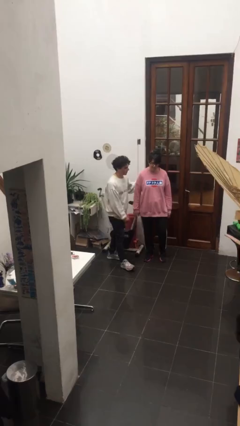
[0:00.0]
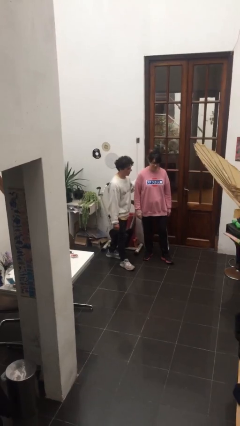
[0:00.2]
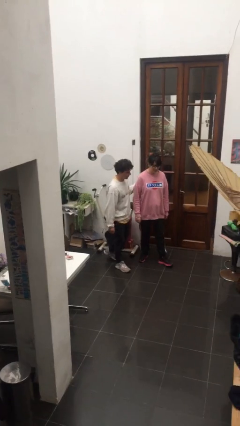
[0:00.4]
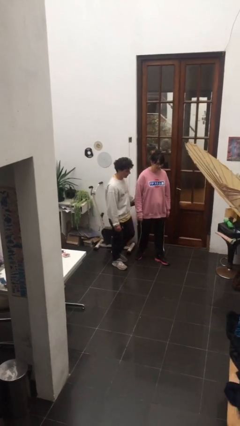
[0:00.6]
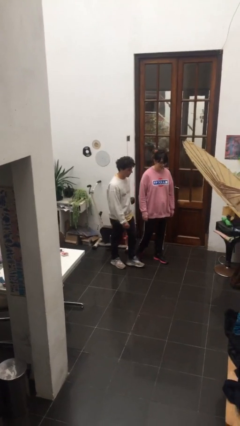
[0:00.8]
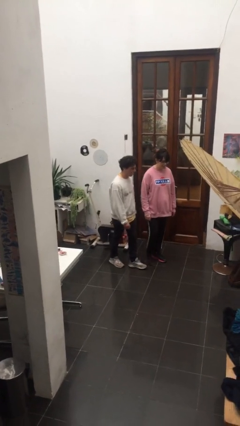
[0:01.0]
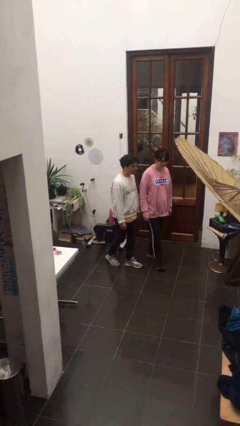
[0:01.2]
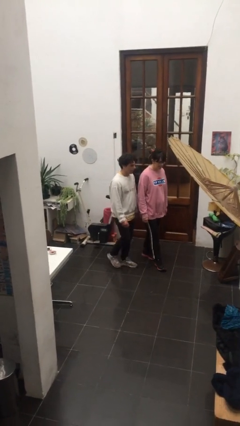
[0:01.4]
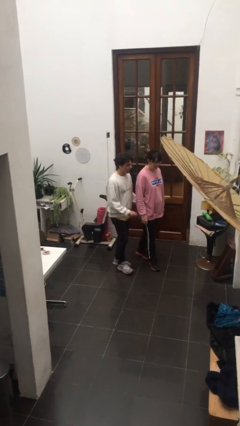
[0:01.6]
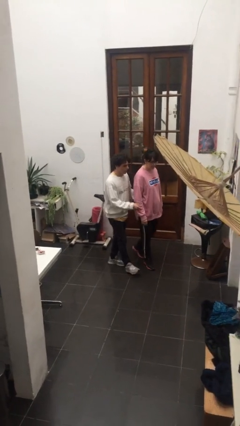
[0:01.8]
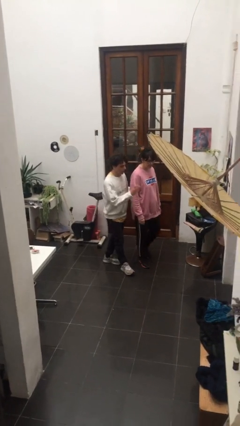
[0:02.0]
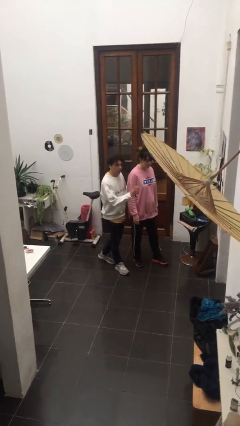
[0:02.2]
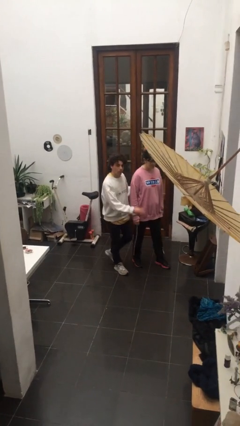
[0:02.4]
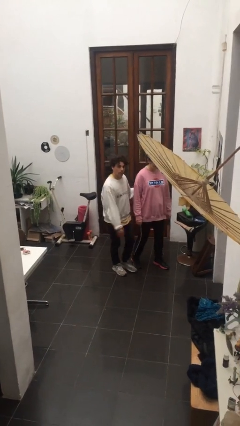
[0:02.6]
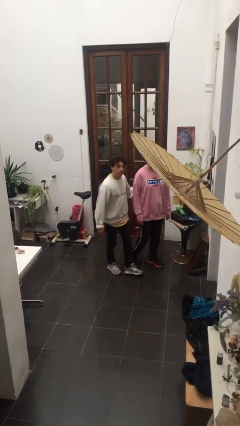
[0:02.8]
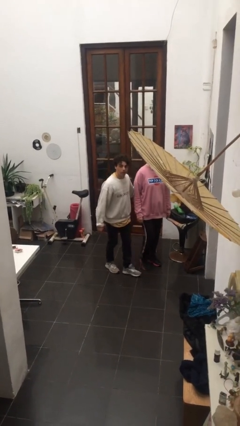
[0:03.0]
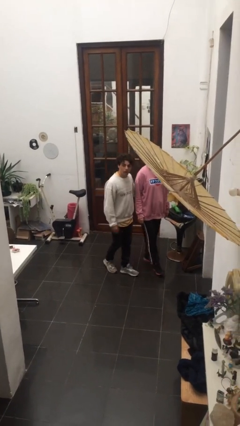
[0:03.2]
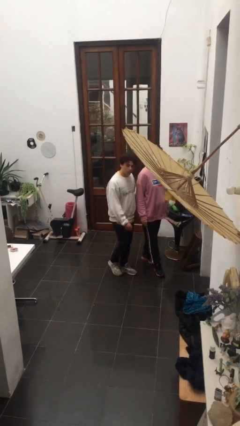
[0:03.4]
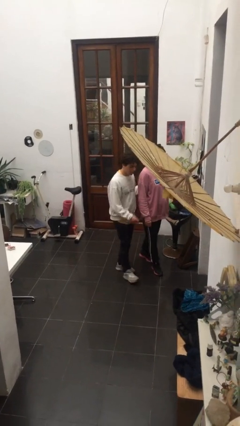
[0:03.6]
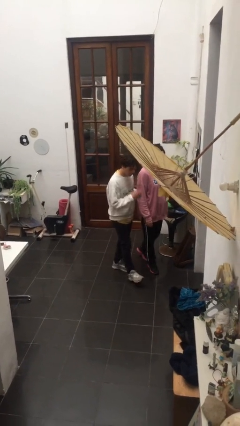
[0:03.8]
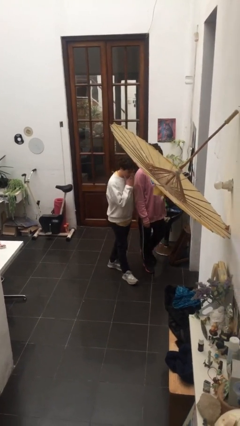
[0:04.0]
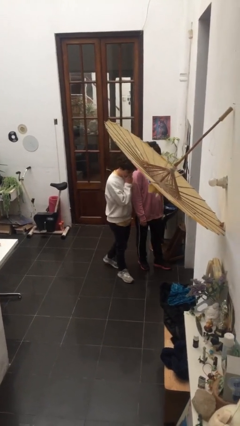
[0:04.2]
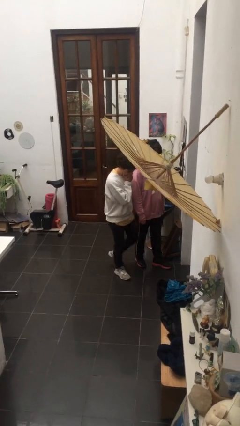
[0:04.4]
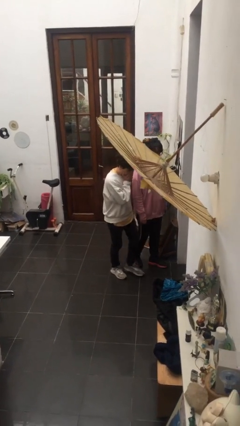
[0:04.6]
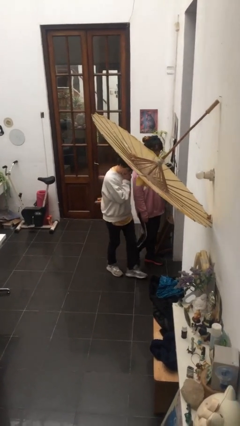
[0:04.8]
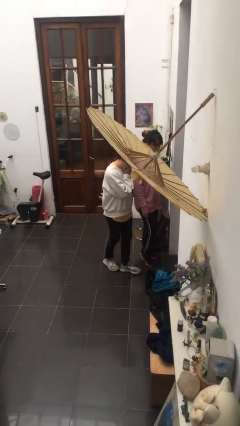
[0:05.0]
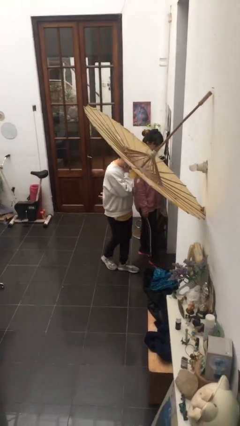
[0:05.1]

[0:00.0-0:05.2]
person talks to person

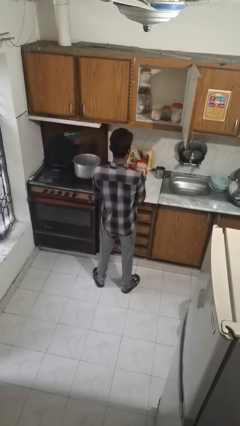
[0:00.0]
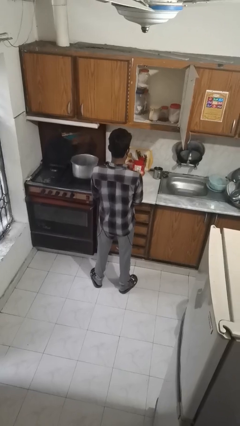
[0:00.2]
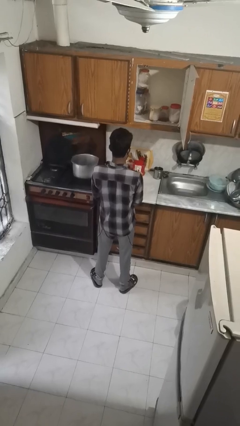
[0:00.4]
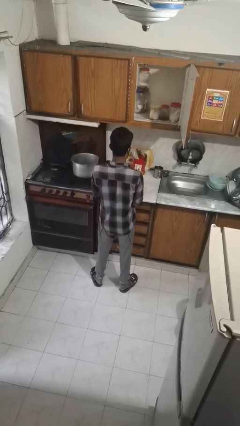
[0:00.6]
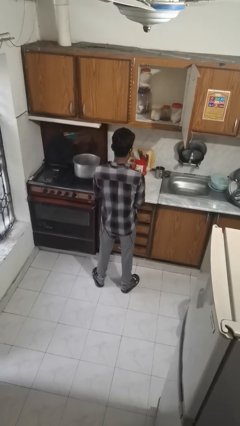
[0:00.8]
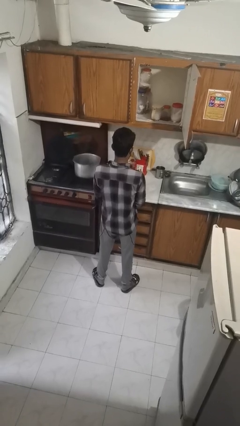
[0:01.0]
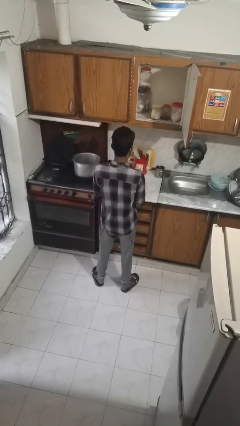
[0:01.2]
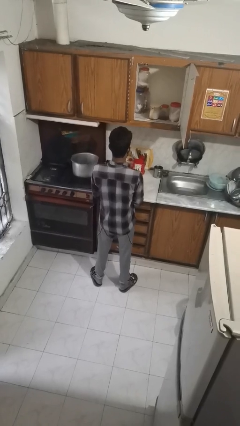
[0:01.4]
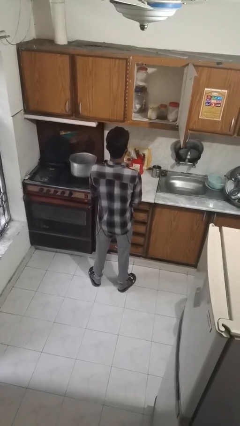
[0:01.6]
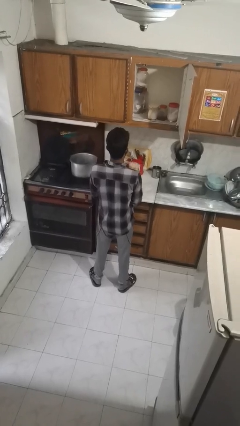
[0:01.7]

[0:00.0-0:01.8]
person puts down object into cabinet

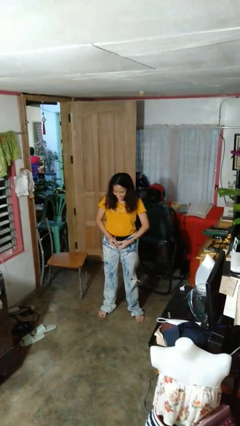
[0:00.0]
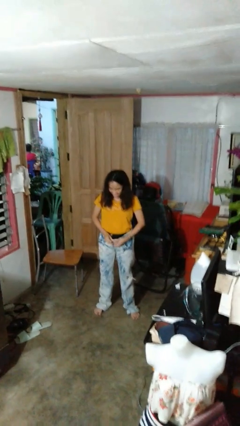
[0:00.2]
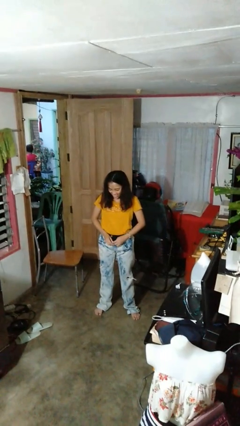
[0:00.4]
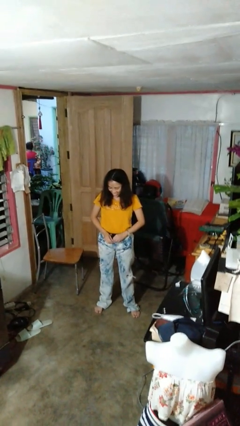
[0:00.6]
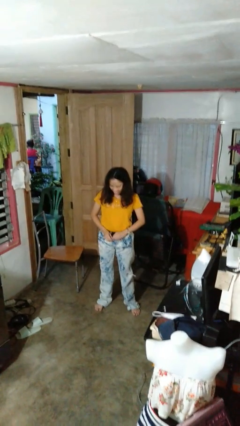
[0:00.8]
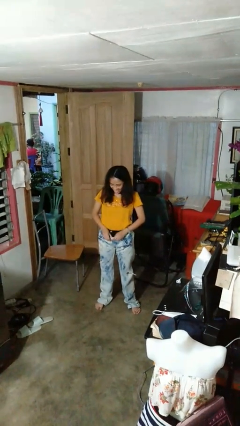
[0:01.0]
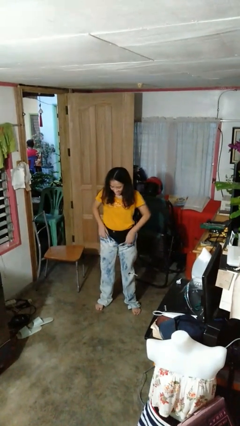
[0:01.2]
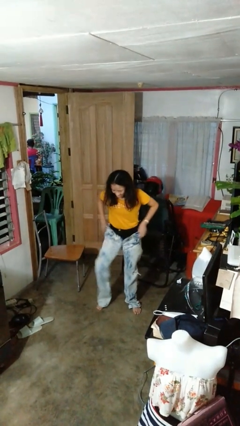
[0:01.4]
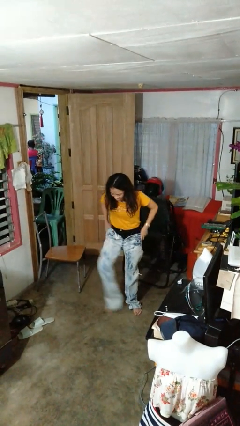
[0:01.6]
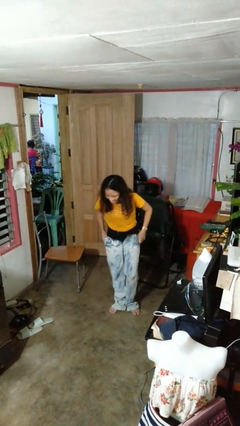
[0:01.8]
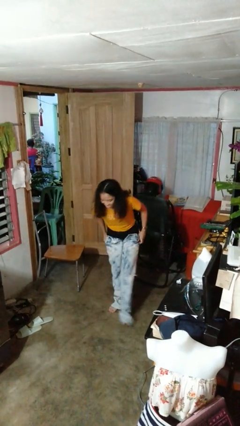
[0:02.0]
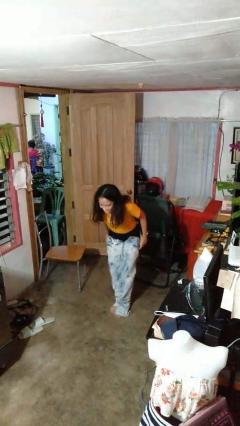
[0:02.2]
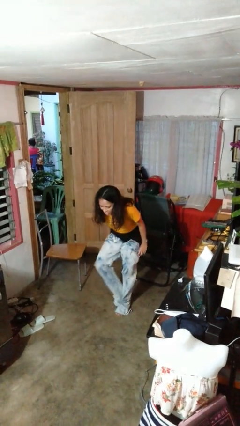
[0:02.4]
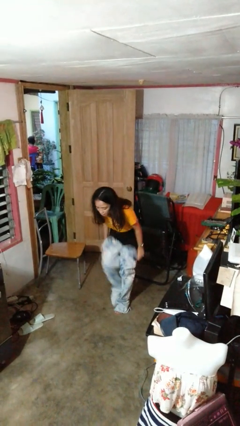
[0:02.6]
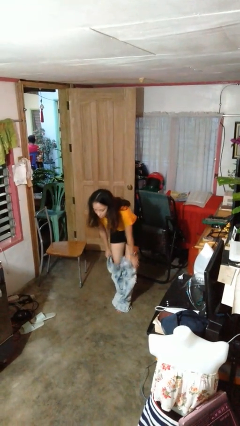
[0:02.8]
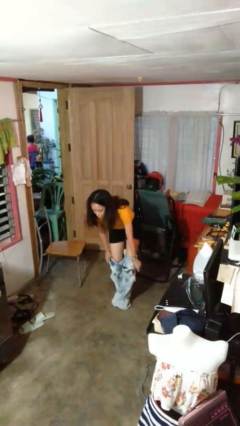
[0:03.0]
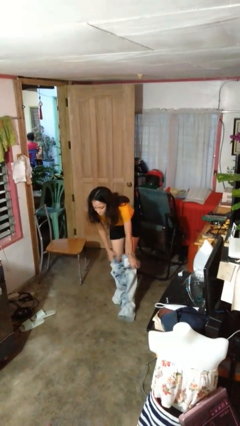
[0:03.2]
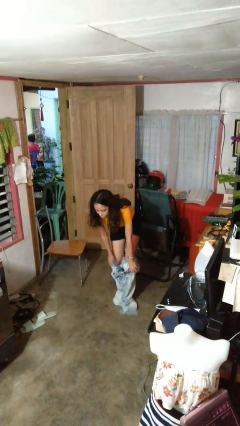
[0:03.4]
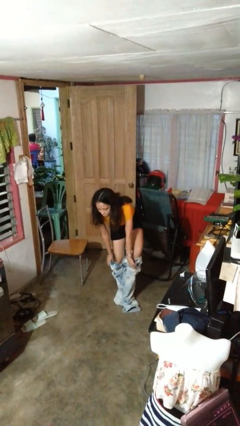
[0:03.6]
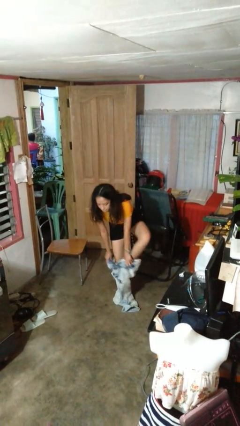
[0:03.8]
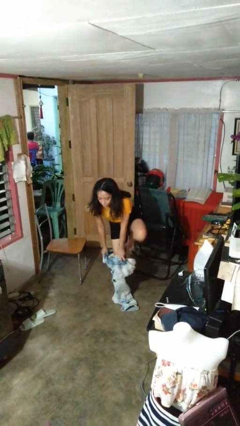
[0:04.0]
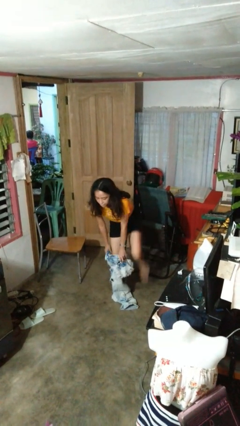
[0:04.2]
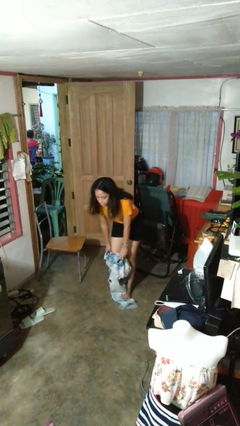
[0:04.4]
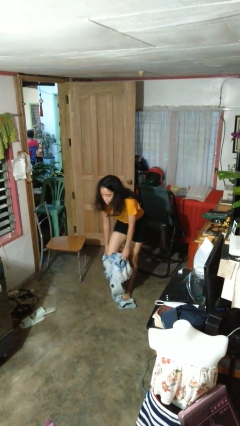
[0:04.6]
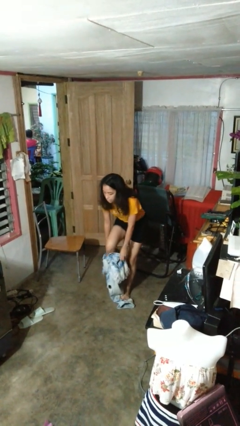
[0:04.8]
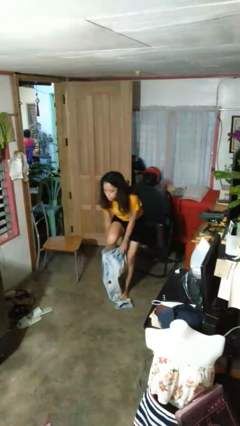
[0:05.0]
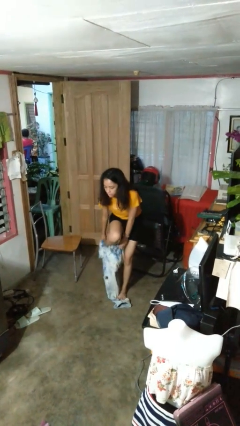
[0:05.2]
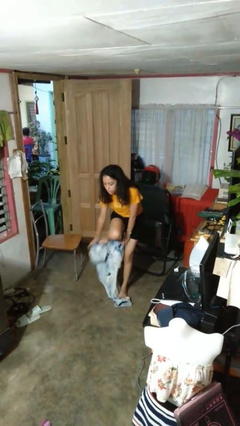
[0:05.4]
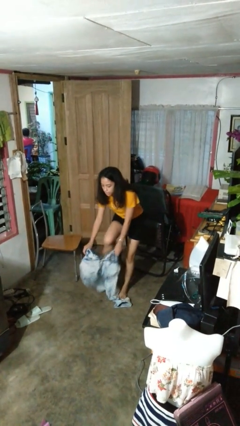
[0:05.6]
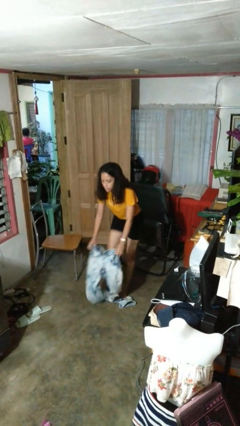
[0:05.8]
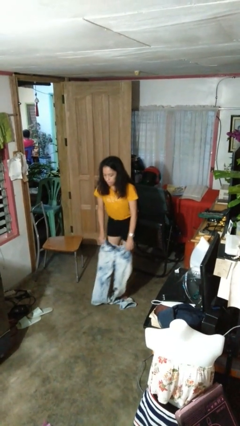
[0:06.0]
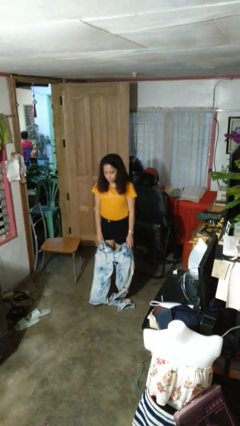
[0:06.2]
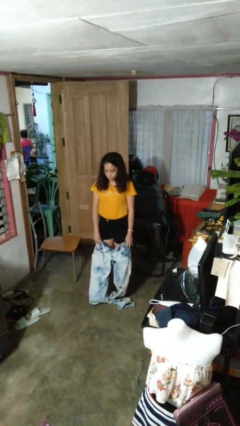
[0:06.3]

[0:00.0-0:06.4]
person takes off pants

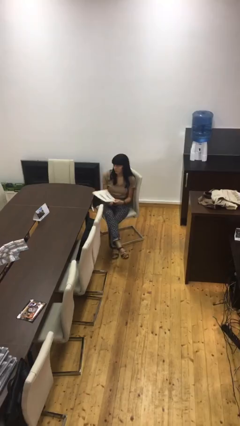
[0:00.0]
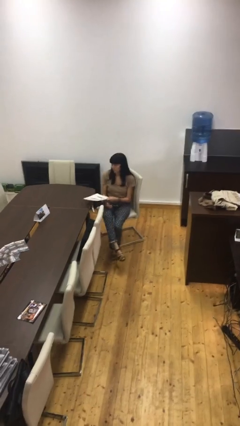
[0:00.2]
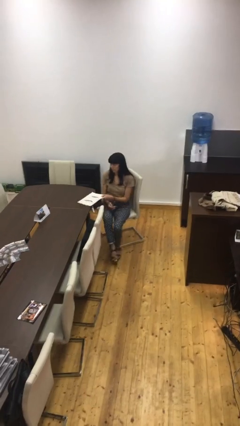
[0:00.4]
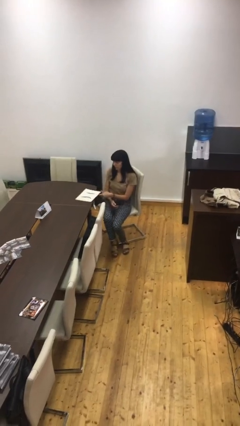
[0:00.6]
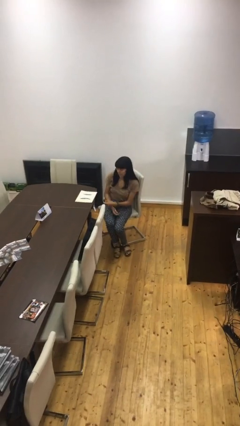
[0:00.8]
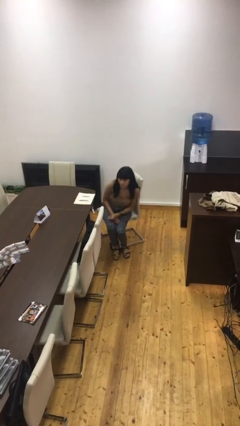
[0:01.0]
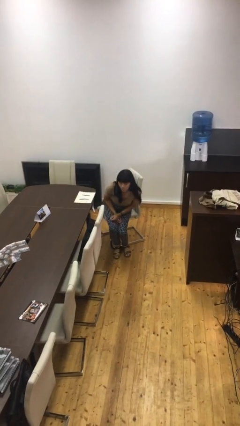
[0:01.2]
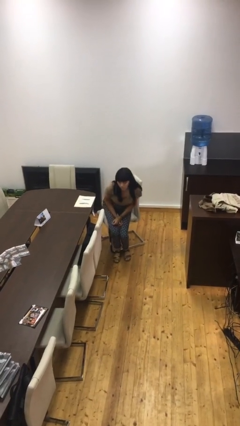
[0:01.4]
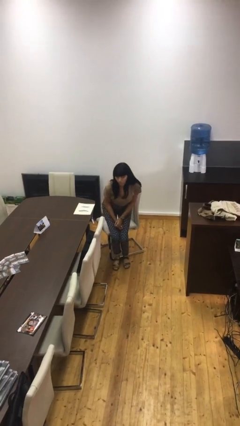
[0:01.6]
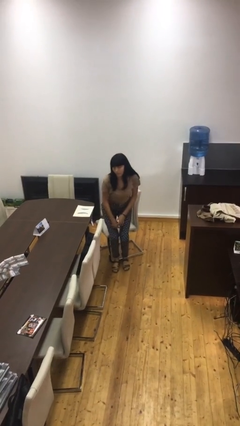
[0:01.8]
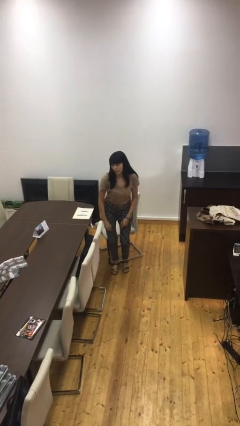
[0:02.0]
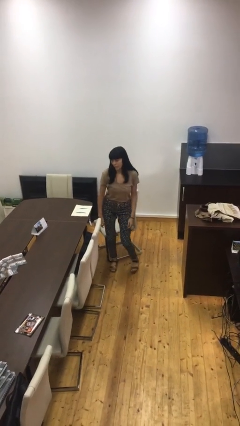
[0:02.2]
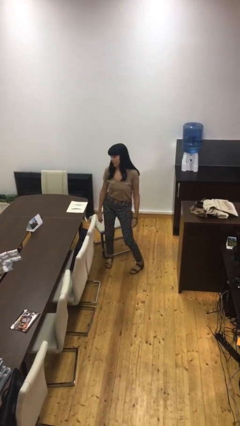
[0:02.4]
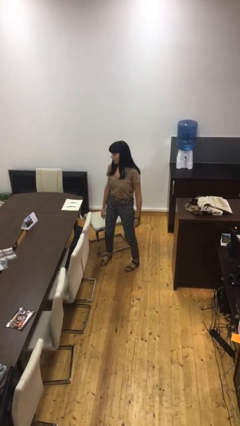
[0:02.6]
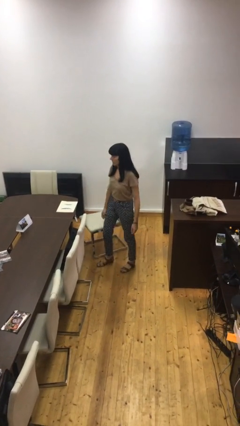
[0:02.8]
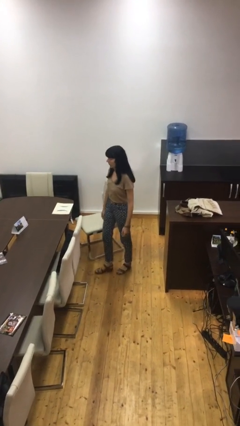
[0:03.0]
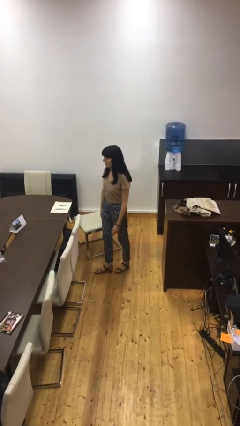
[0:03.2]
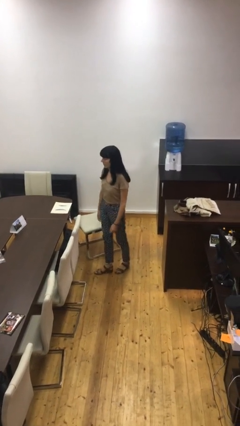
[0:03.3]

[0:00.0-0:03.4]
person stands up

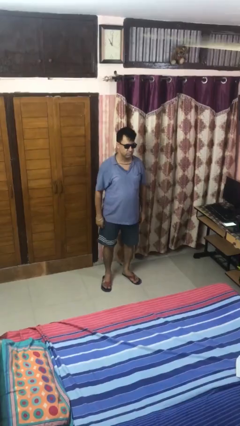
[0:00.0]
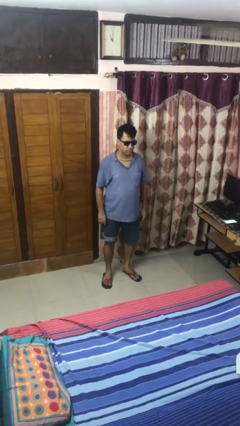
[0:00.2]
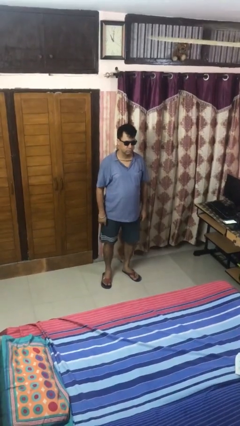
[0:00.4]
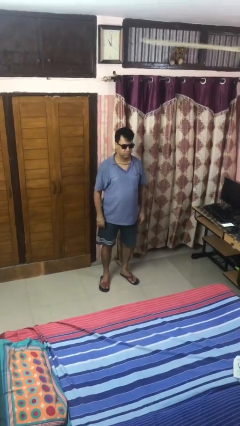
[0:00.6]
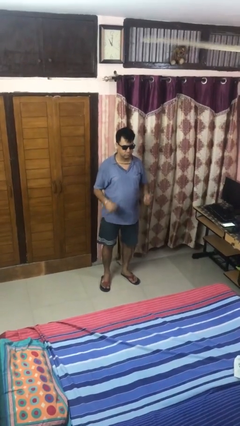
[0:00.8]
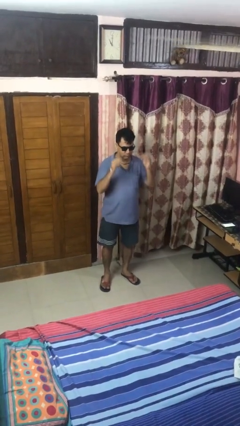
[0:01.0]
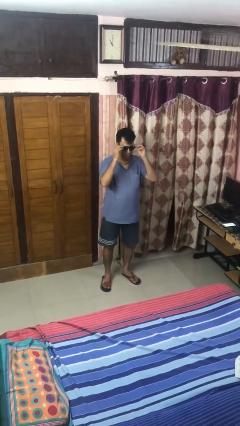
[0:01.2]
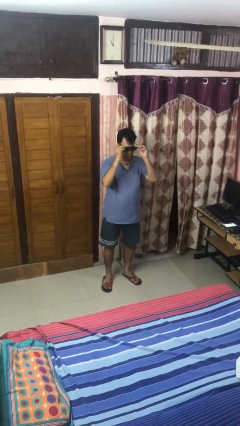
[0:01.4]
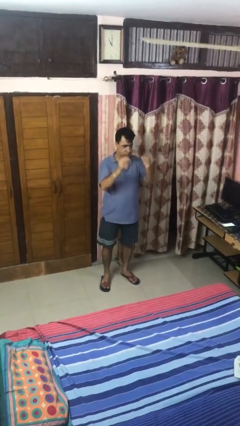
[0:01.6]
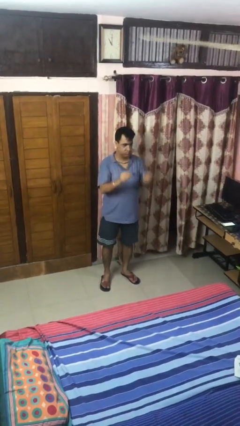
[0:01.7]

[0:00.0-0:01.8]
person takes off sunglasses
